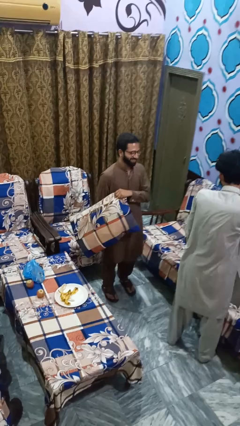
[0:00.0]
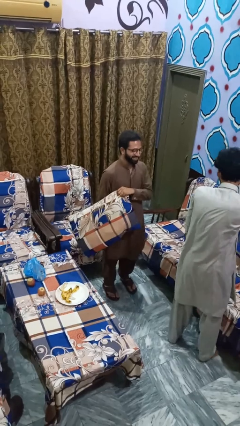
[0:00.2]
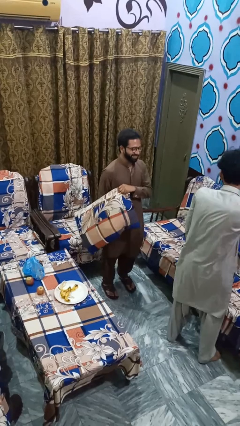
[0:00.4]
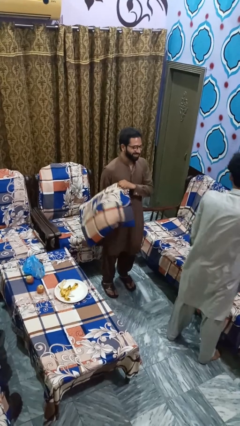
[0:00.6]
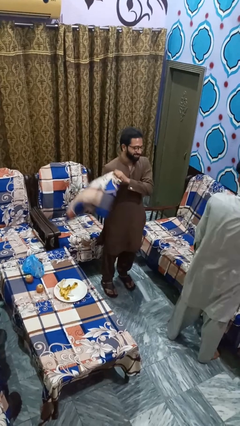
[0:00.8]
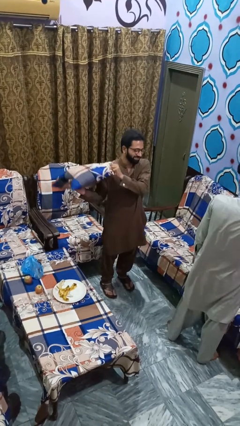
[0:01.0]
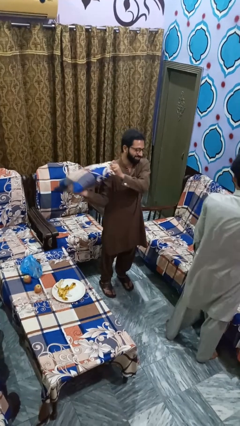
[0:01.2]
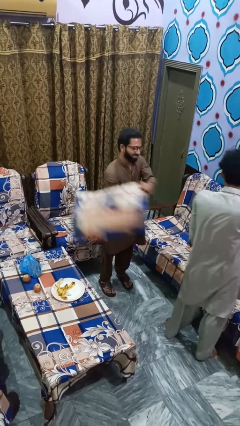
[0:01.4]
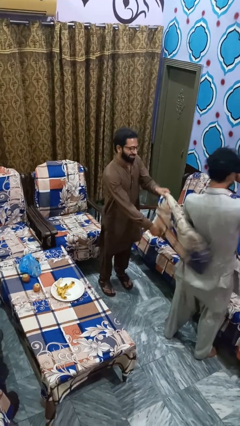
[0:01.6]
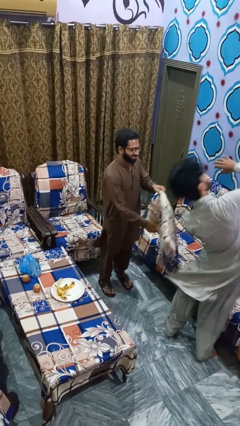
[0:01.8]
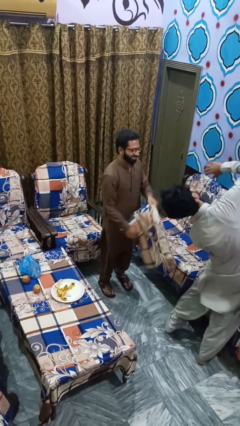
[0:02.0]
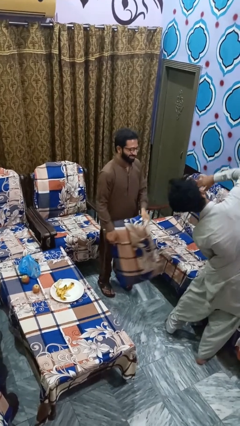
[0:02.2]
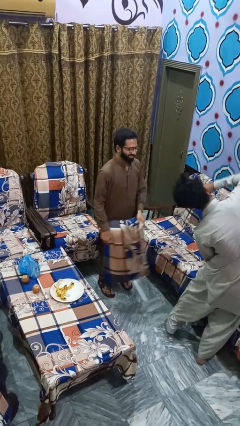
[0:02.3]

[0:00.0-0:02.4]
person hits person with pillow

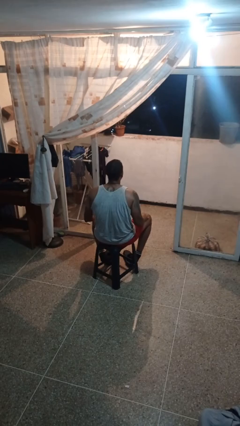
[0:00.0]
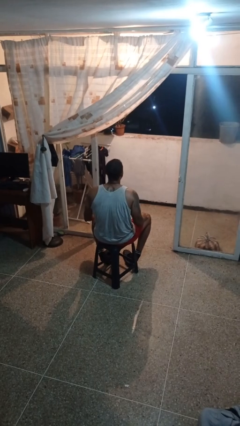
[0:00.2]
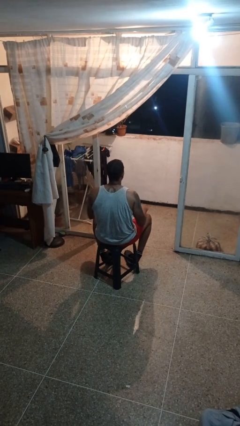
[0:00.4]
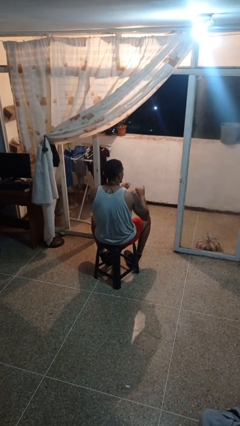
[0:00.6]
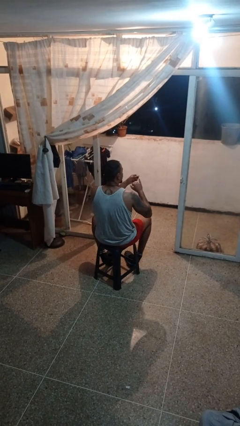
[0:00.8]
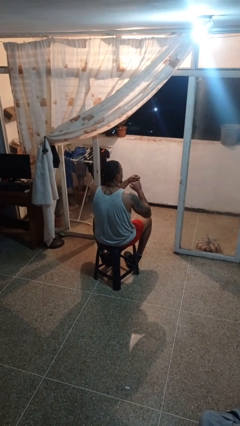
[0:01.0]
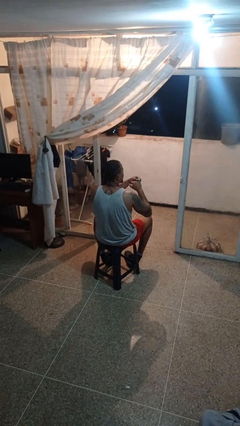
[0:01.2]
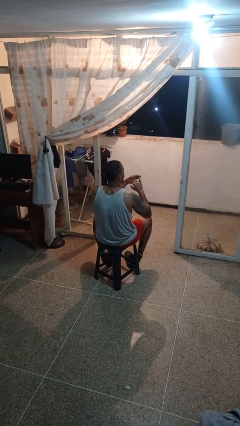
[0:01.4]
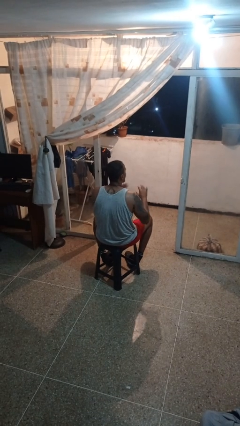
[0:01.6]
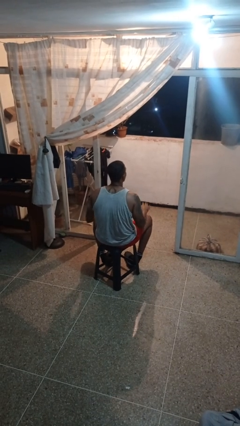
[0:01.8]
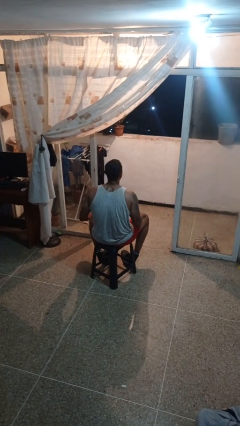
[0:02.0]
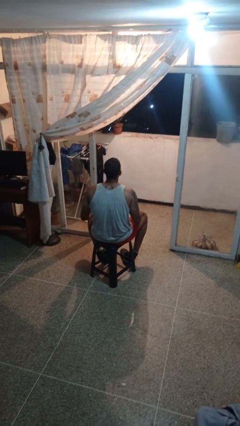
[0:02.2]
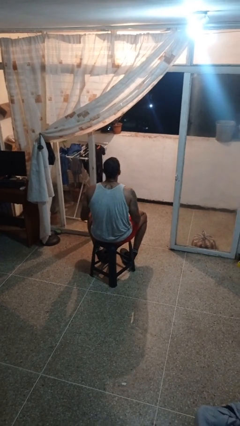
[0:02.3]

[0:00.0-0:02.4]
person puts on ring

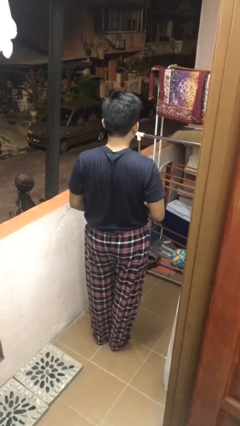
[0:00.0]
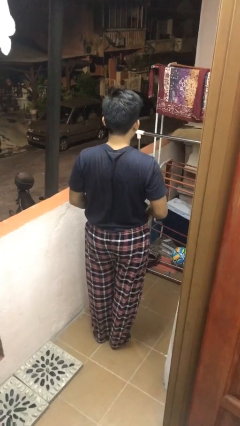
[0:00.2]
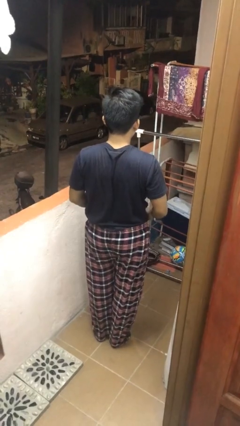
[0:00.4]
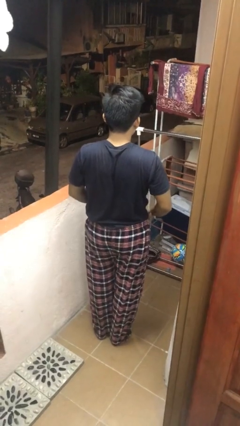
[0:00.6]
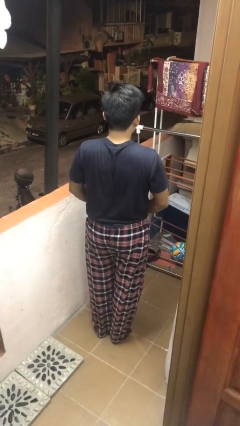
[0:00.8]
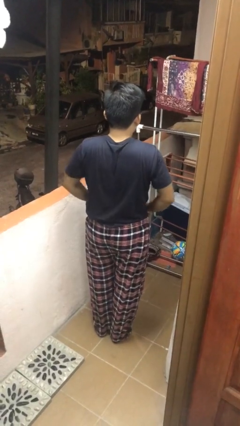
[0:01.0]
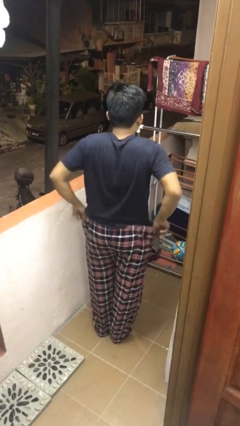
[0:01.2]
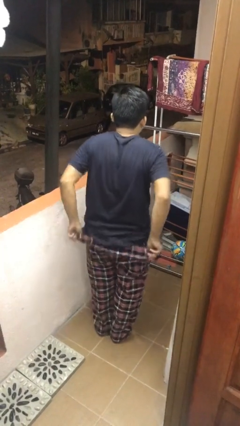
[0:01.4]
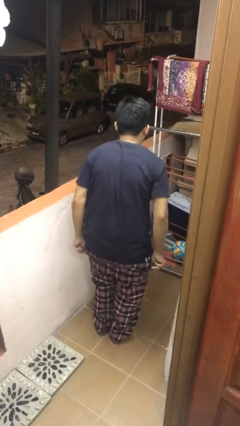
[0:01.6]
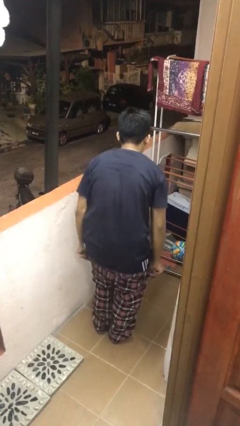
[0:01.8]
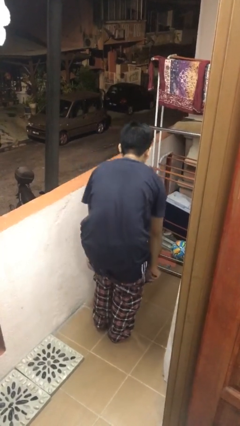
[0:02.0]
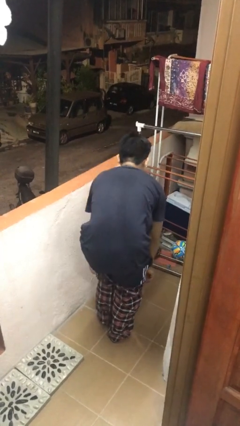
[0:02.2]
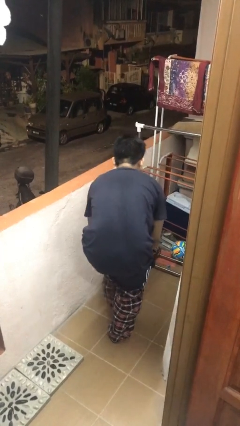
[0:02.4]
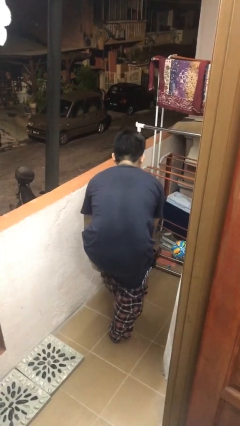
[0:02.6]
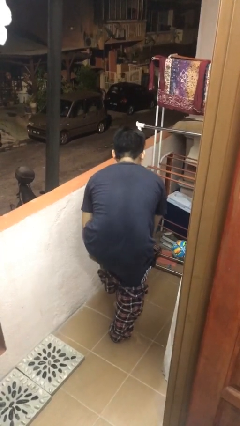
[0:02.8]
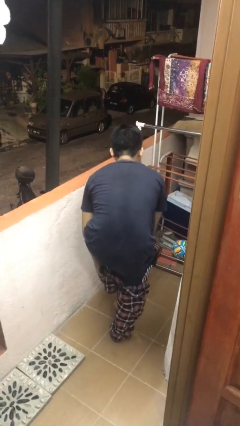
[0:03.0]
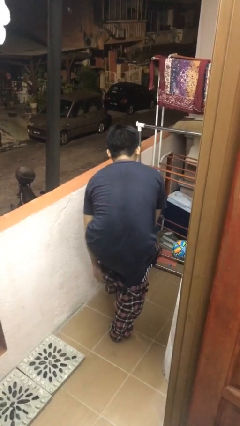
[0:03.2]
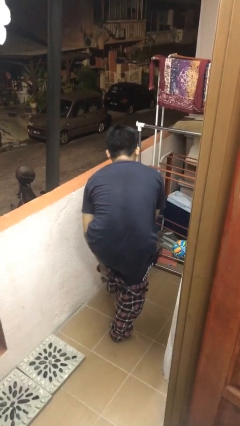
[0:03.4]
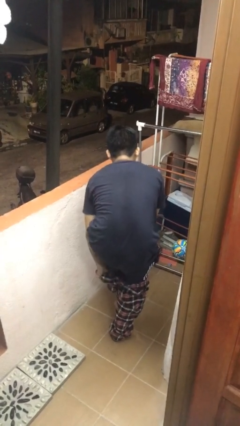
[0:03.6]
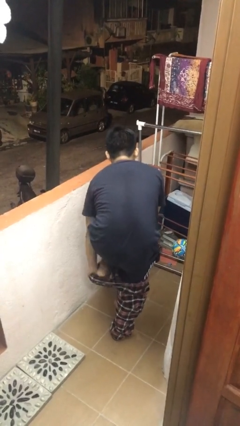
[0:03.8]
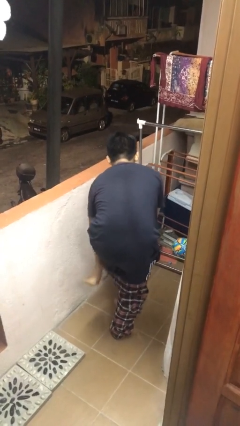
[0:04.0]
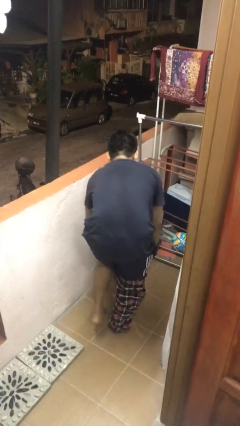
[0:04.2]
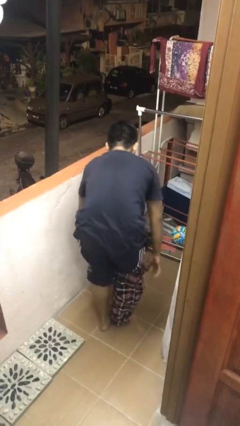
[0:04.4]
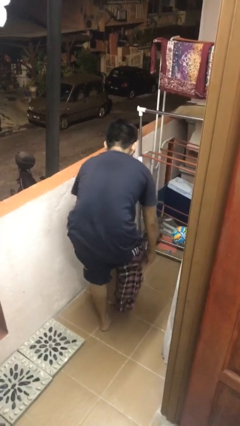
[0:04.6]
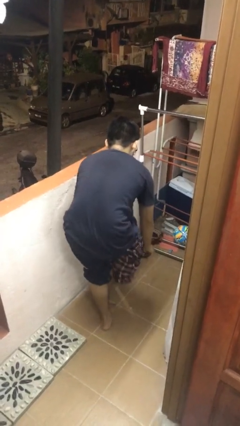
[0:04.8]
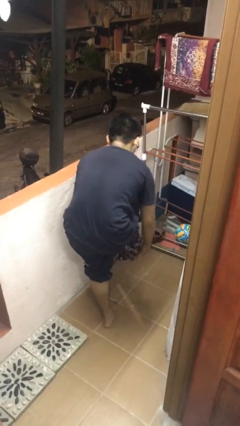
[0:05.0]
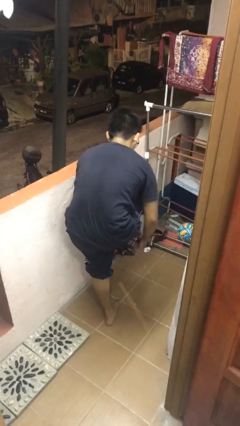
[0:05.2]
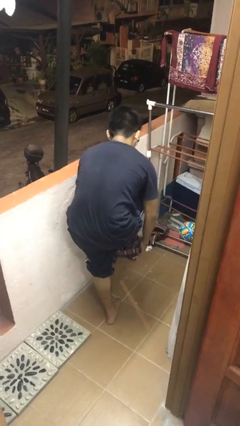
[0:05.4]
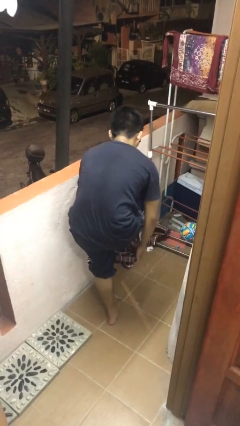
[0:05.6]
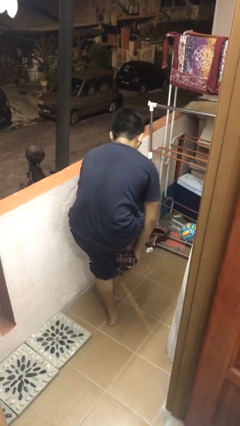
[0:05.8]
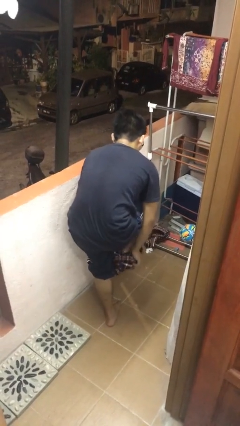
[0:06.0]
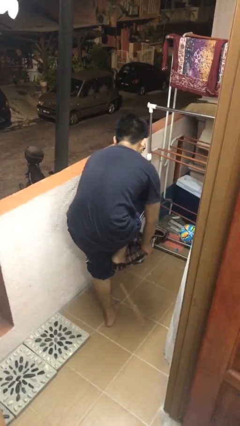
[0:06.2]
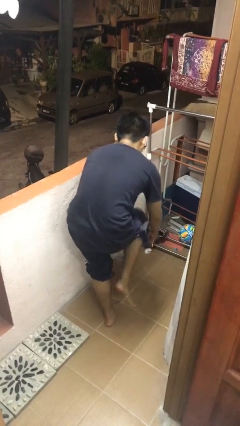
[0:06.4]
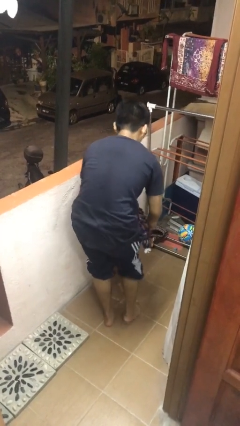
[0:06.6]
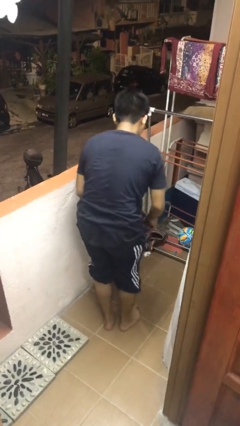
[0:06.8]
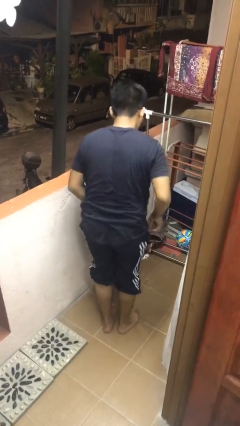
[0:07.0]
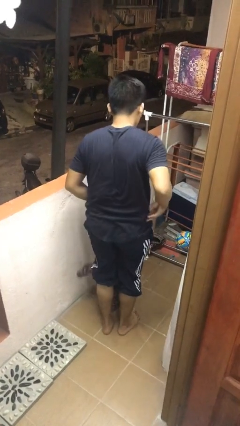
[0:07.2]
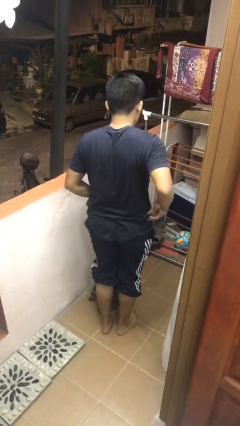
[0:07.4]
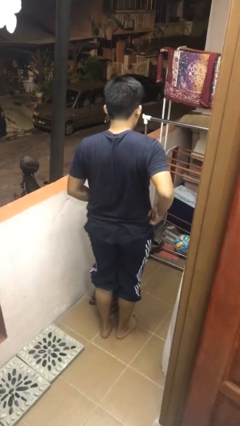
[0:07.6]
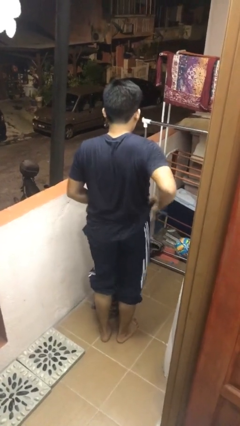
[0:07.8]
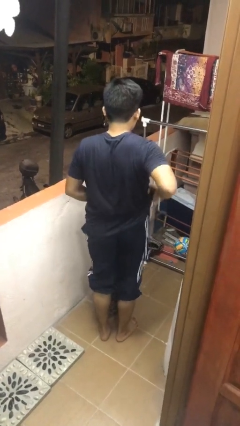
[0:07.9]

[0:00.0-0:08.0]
person takes off pants

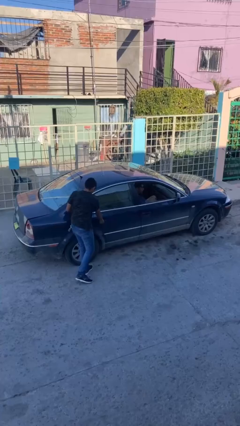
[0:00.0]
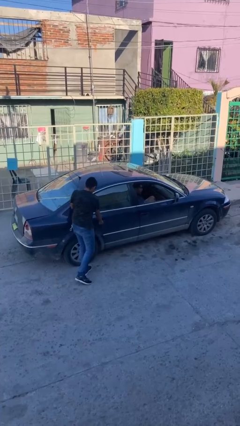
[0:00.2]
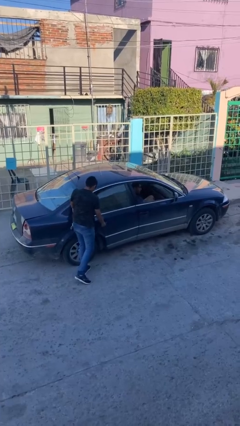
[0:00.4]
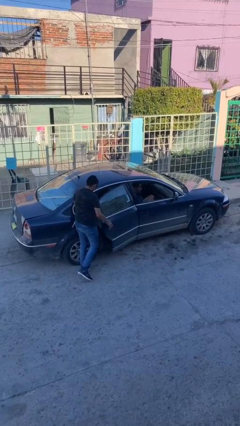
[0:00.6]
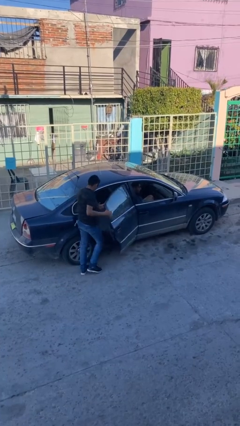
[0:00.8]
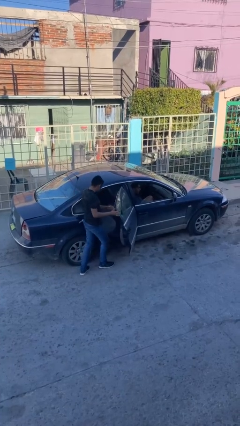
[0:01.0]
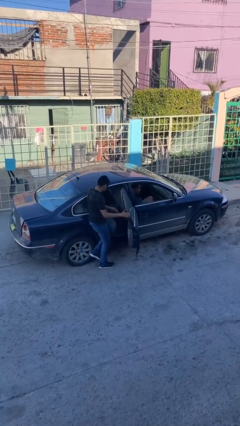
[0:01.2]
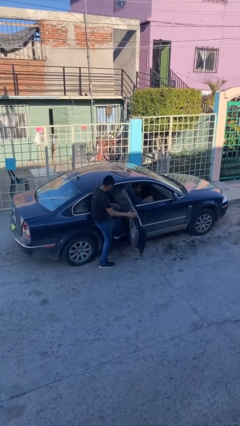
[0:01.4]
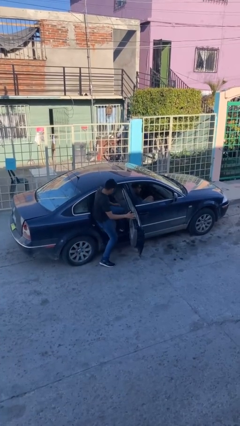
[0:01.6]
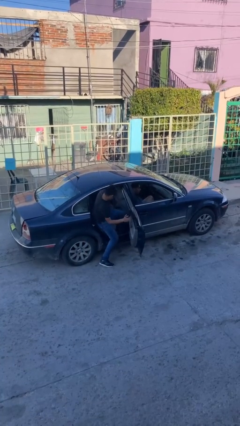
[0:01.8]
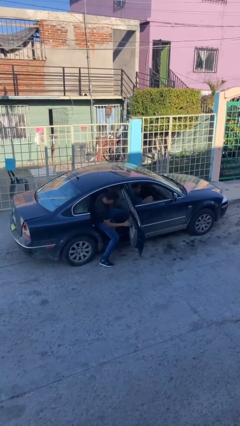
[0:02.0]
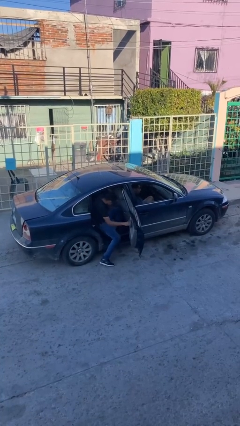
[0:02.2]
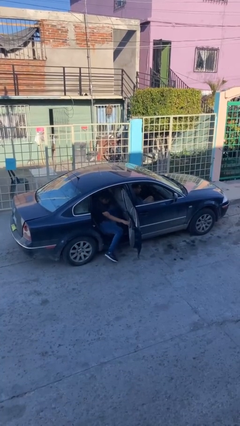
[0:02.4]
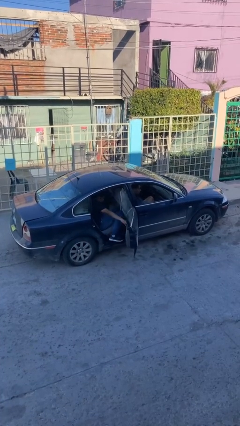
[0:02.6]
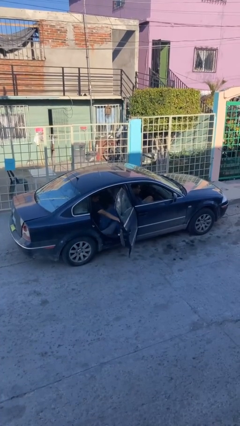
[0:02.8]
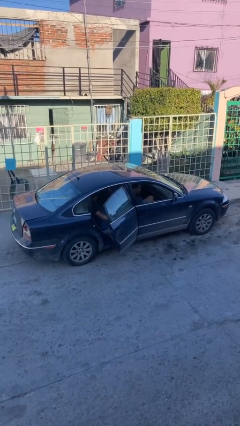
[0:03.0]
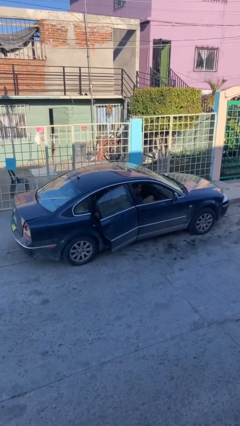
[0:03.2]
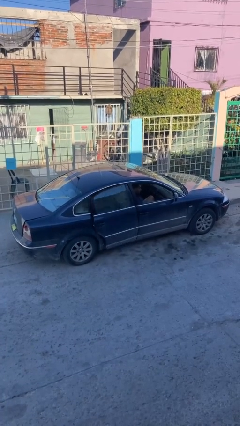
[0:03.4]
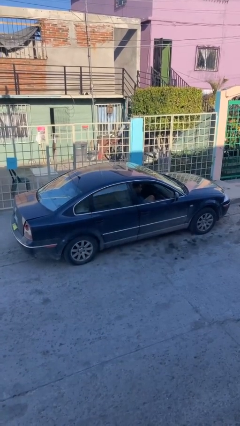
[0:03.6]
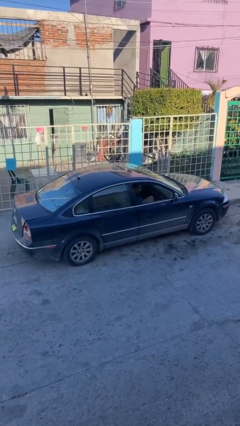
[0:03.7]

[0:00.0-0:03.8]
car picks up person

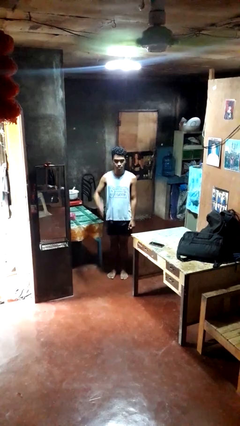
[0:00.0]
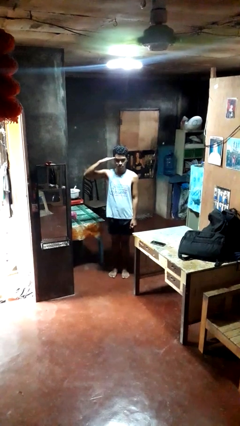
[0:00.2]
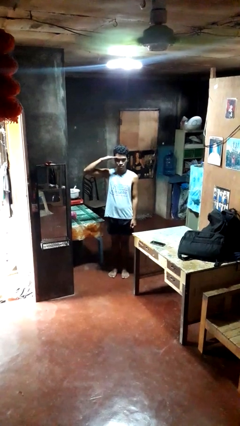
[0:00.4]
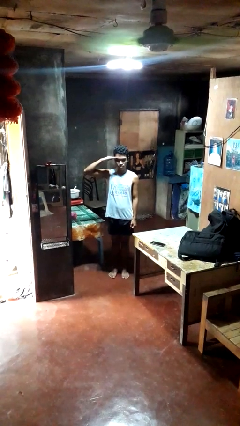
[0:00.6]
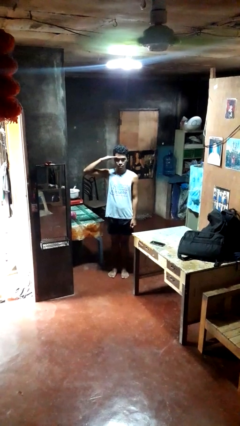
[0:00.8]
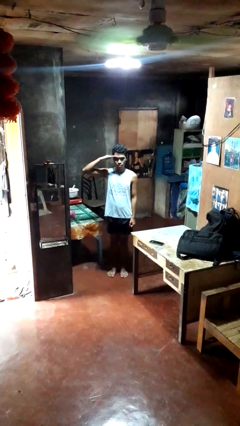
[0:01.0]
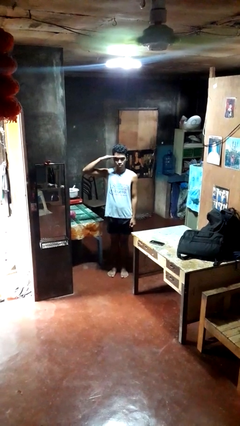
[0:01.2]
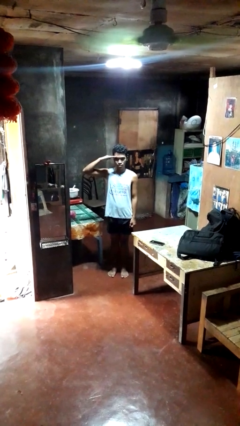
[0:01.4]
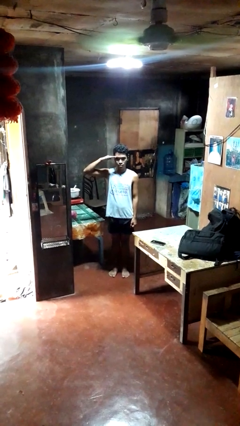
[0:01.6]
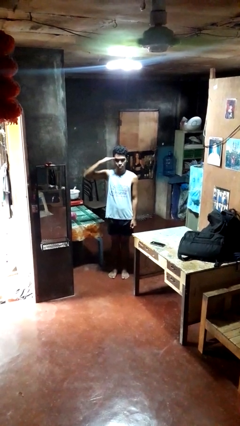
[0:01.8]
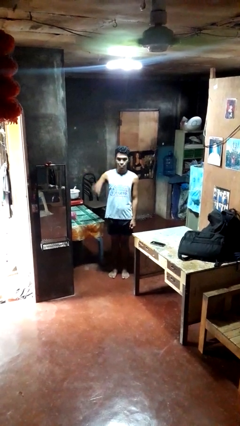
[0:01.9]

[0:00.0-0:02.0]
person salutes
